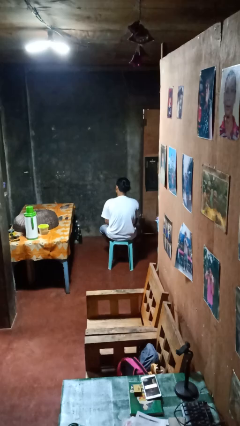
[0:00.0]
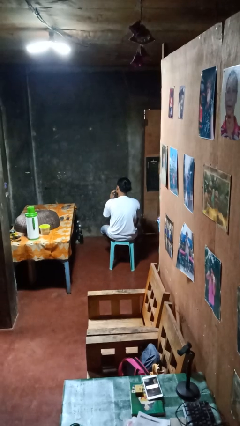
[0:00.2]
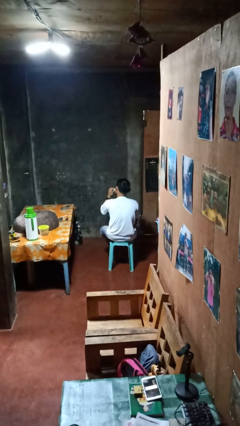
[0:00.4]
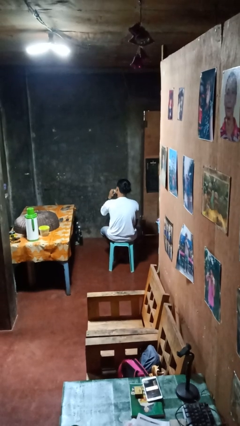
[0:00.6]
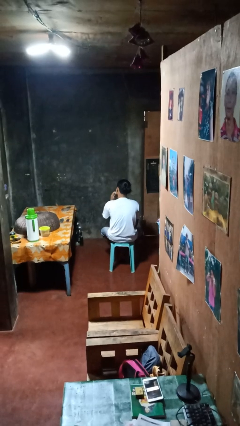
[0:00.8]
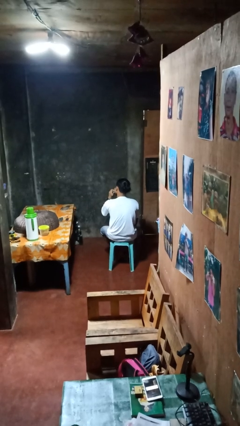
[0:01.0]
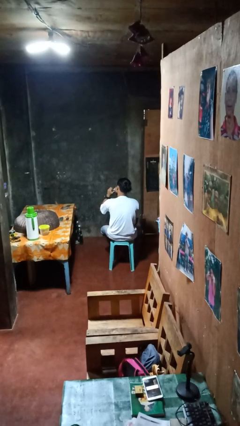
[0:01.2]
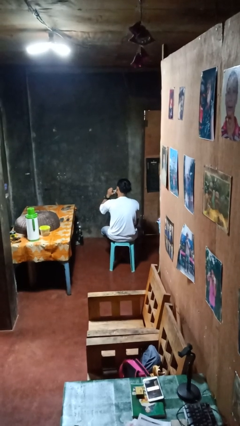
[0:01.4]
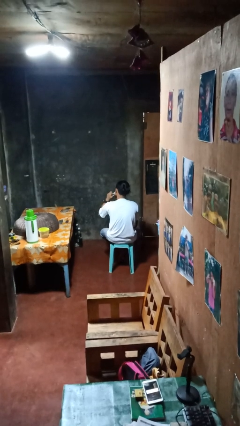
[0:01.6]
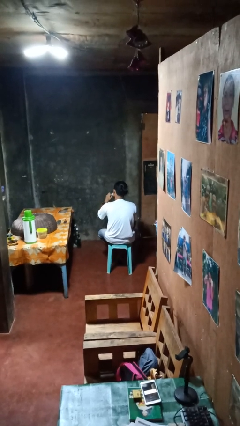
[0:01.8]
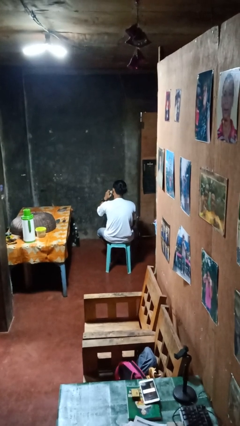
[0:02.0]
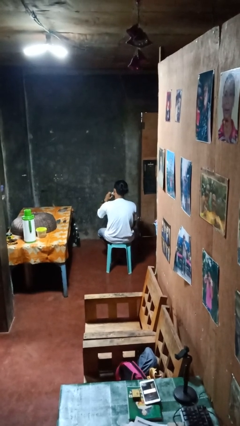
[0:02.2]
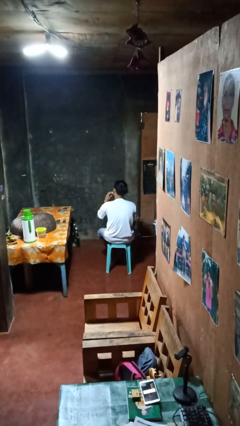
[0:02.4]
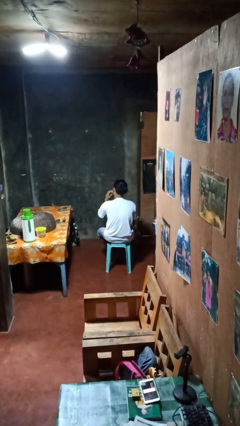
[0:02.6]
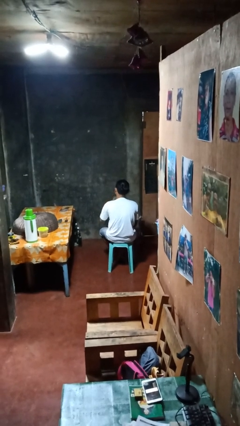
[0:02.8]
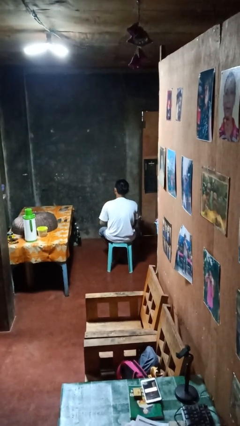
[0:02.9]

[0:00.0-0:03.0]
person shaves face

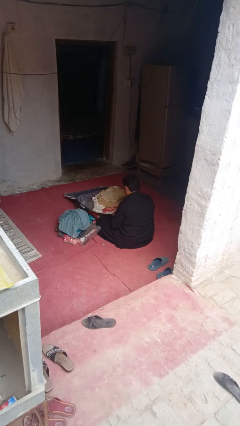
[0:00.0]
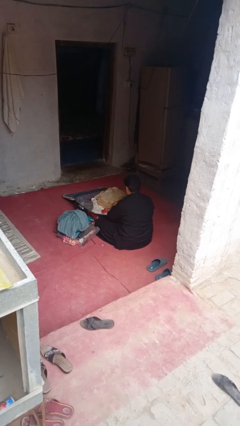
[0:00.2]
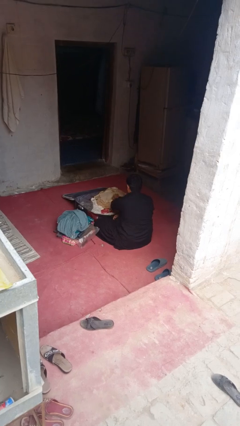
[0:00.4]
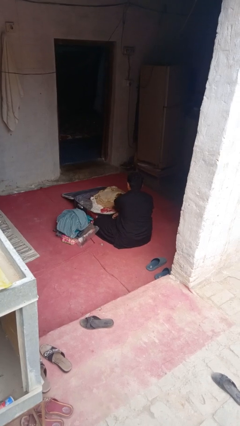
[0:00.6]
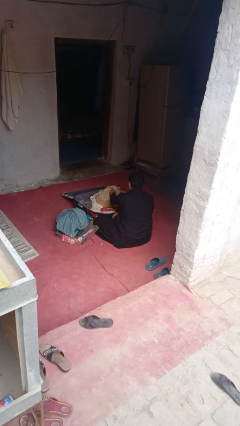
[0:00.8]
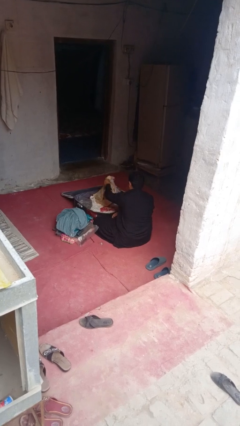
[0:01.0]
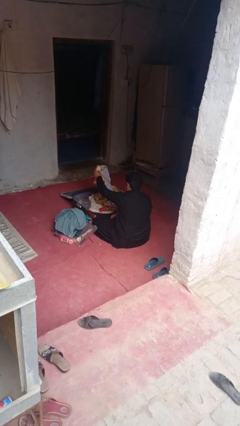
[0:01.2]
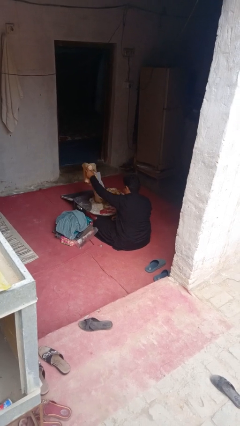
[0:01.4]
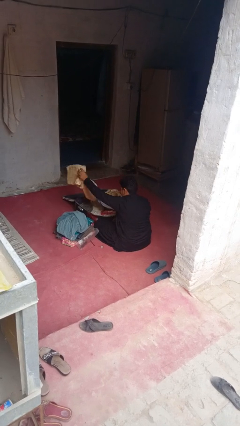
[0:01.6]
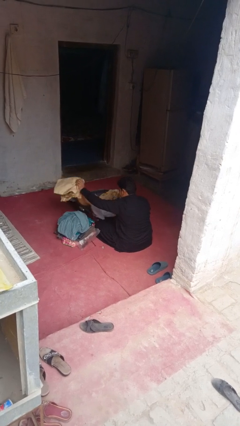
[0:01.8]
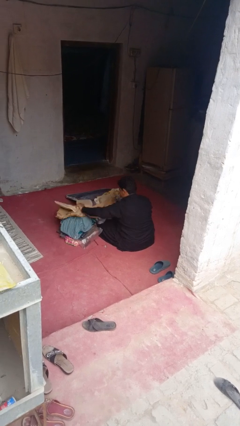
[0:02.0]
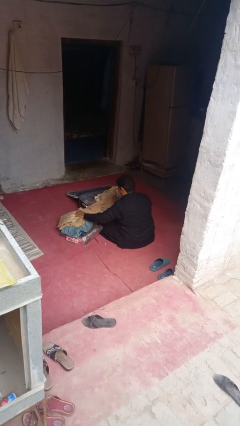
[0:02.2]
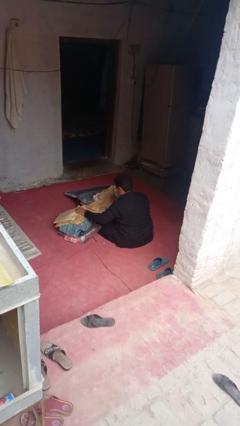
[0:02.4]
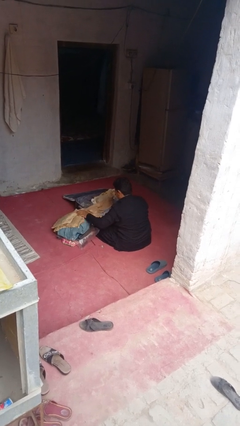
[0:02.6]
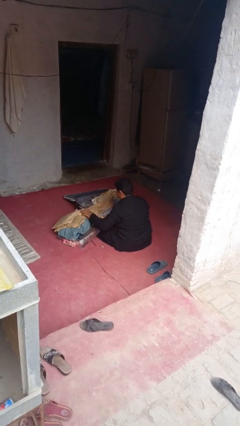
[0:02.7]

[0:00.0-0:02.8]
person unloads clothes from suitcase

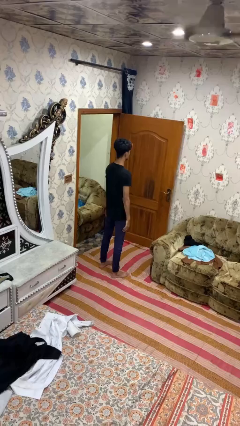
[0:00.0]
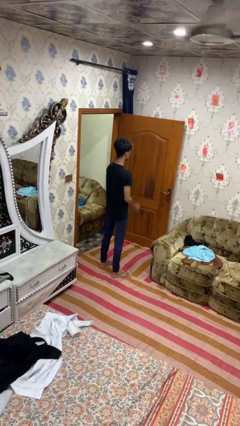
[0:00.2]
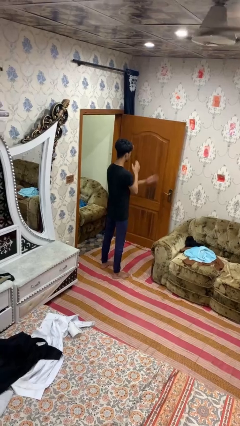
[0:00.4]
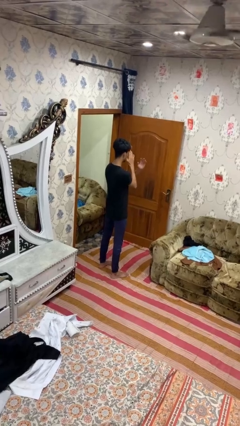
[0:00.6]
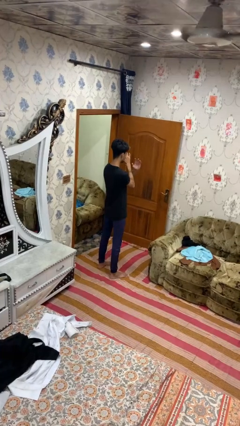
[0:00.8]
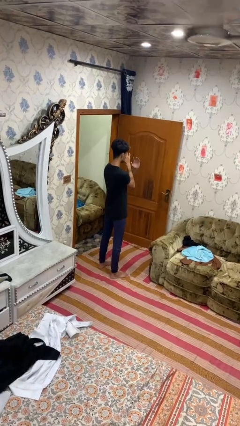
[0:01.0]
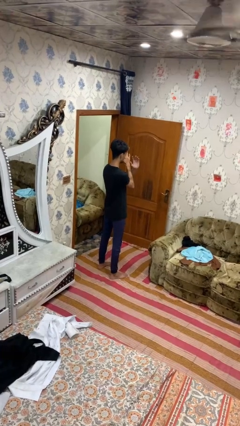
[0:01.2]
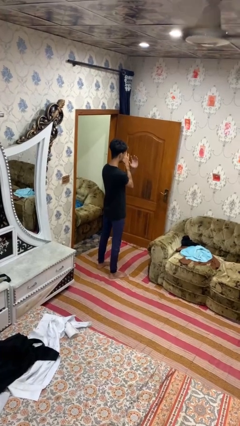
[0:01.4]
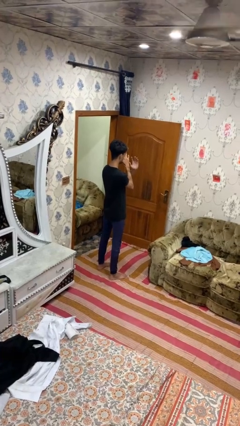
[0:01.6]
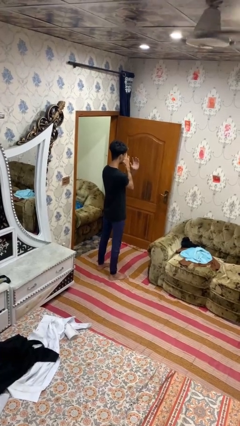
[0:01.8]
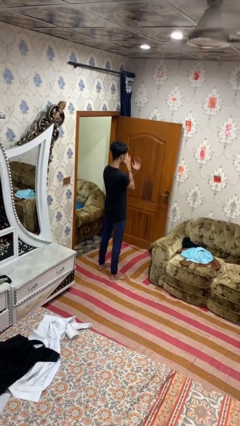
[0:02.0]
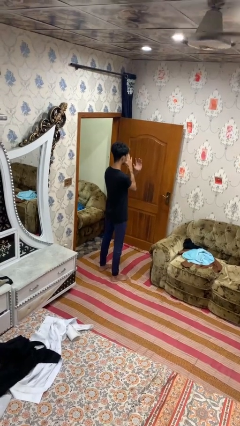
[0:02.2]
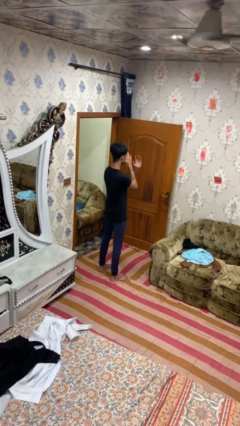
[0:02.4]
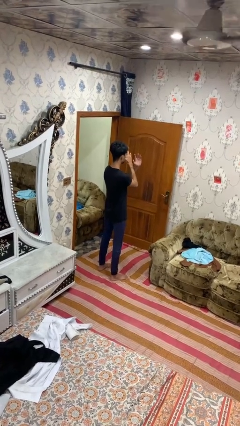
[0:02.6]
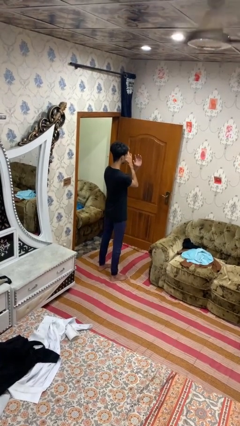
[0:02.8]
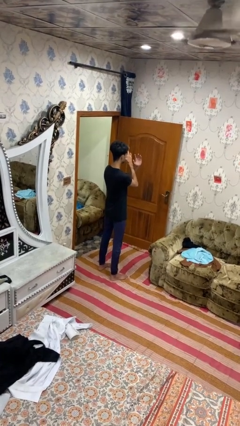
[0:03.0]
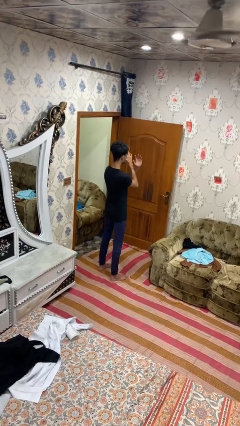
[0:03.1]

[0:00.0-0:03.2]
person gestures arms x

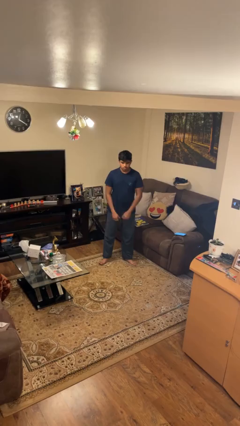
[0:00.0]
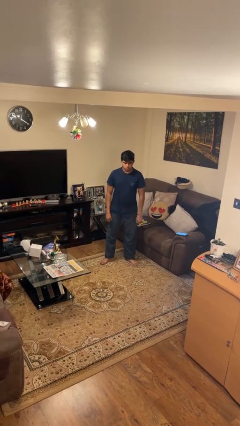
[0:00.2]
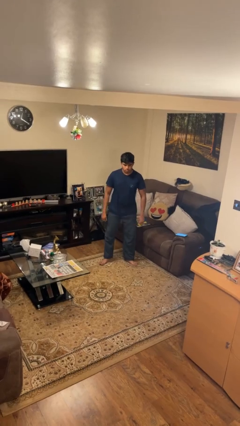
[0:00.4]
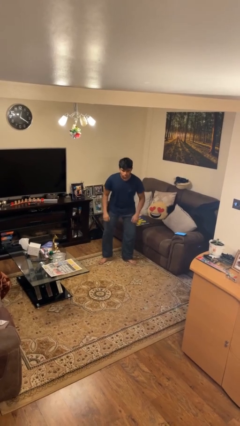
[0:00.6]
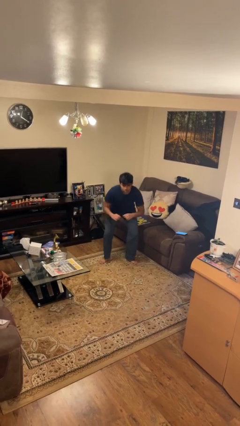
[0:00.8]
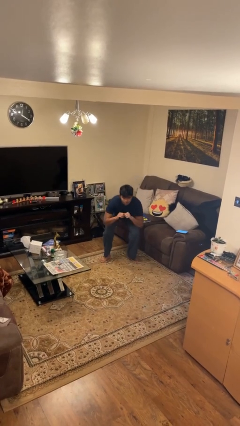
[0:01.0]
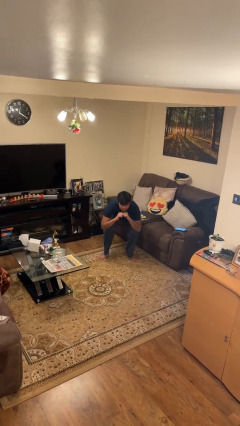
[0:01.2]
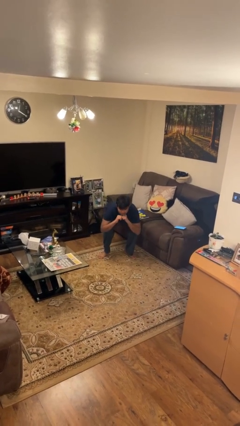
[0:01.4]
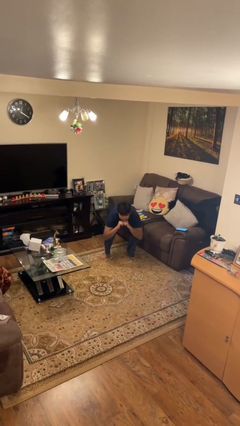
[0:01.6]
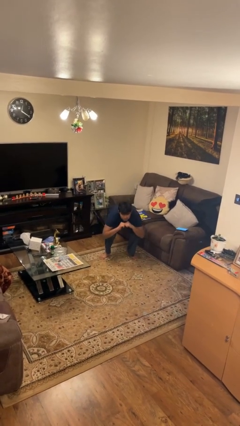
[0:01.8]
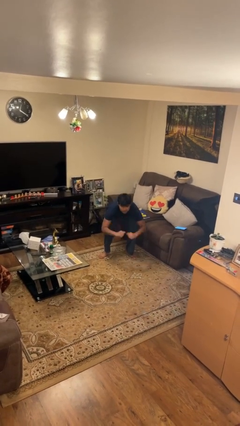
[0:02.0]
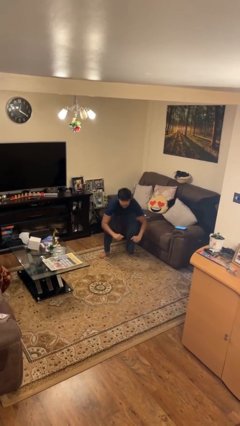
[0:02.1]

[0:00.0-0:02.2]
person squats

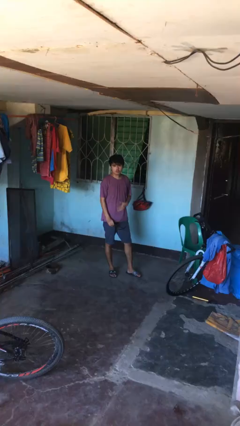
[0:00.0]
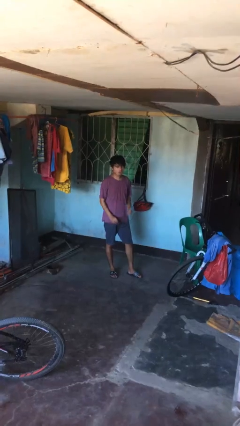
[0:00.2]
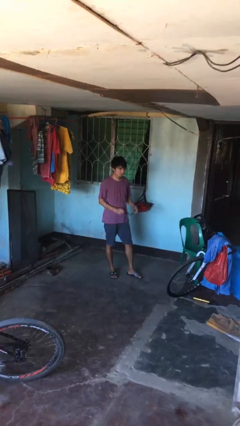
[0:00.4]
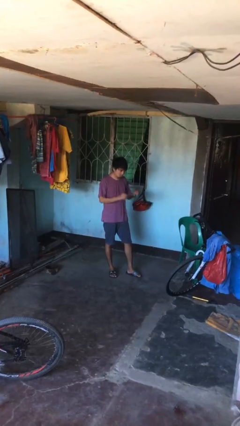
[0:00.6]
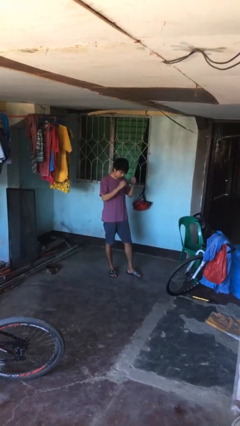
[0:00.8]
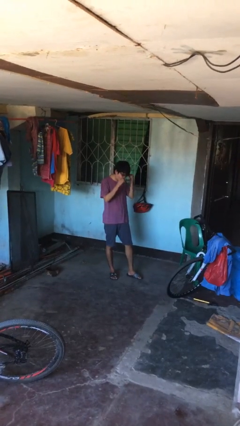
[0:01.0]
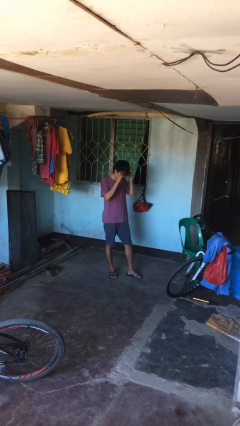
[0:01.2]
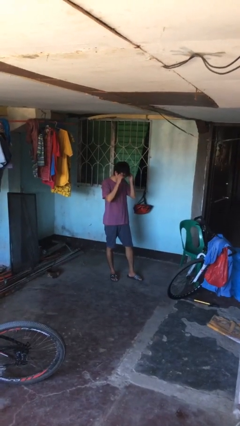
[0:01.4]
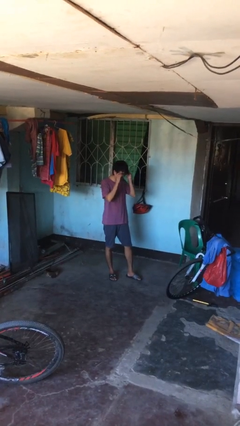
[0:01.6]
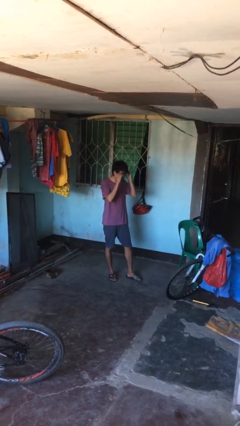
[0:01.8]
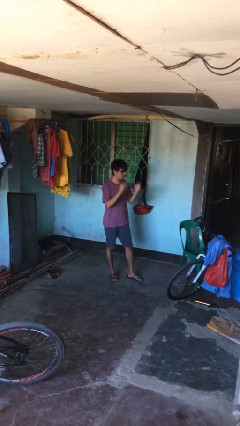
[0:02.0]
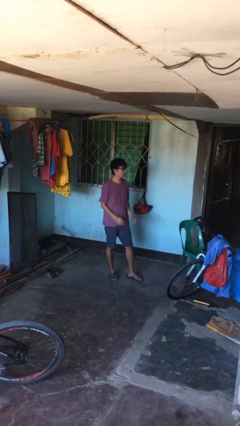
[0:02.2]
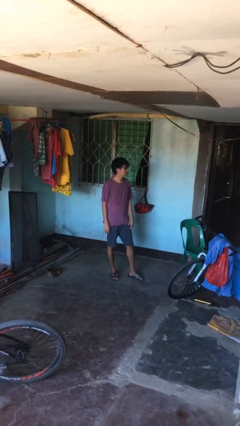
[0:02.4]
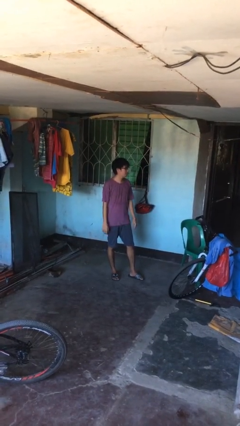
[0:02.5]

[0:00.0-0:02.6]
person puts on glasses

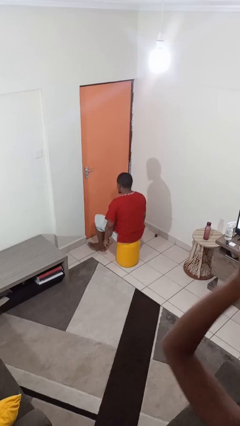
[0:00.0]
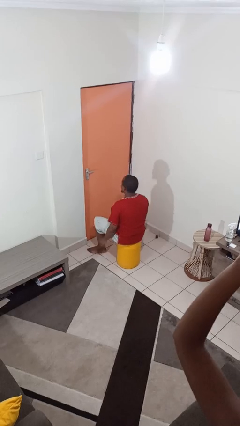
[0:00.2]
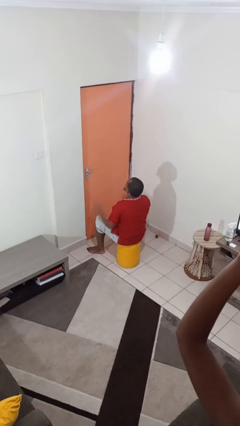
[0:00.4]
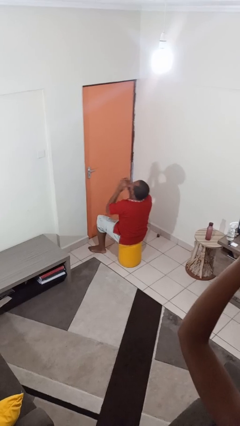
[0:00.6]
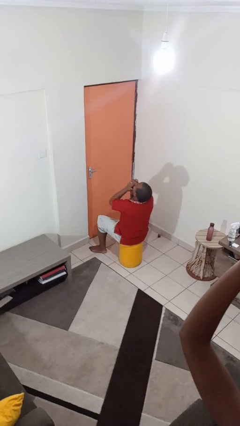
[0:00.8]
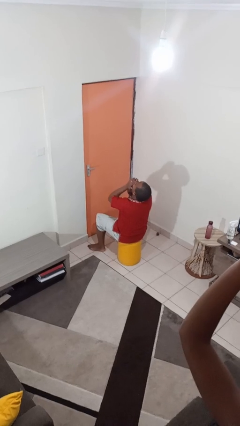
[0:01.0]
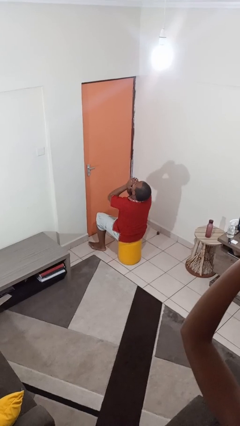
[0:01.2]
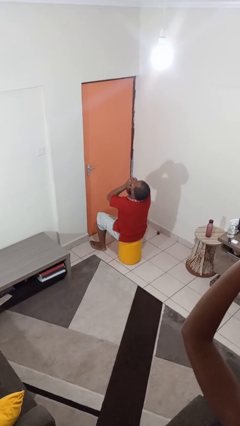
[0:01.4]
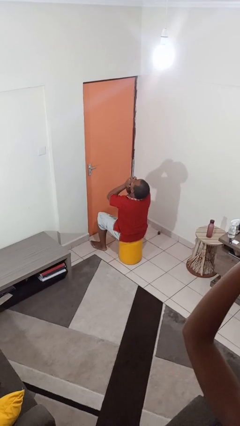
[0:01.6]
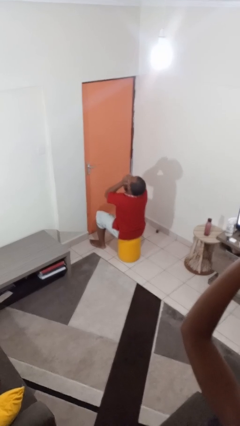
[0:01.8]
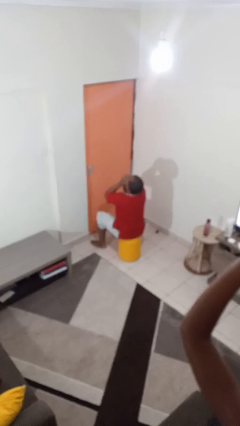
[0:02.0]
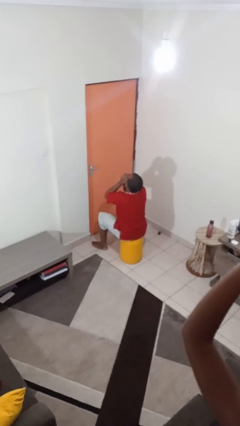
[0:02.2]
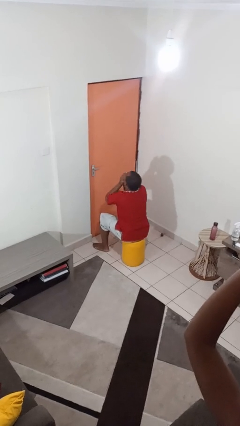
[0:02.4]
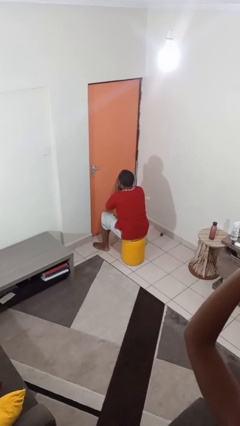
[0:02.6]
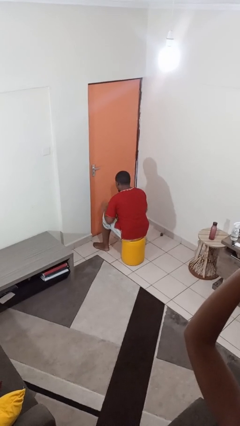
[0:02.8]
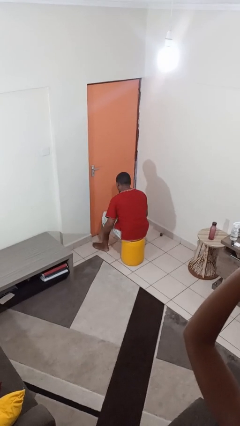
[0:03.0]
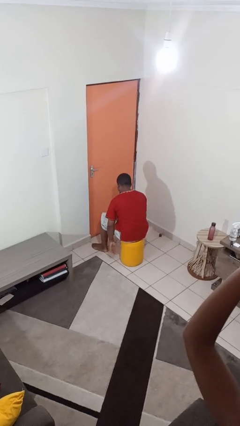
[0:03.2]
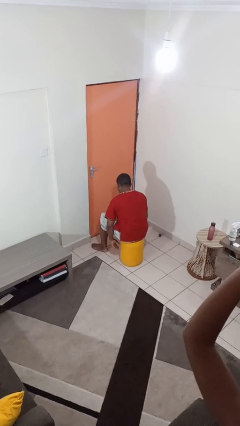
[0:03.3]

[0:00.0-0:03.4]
person yawns
